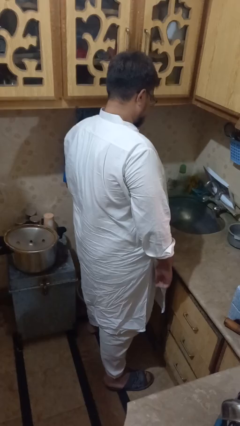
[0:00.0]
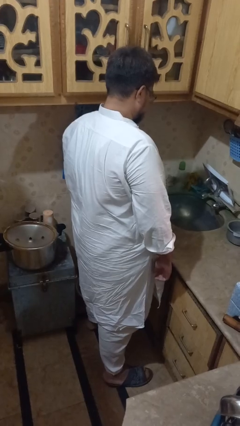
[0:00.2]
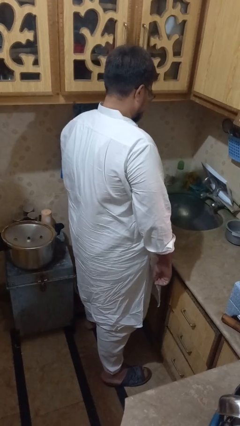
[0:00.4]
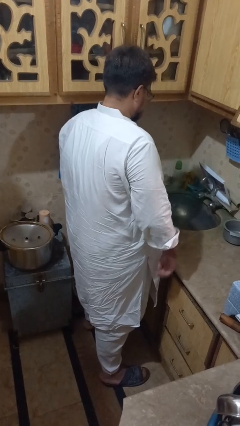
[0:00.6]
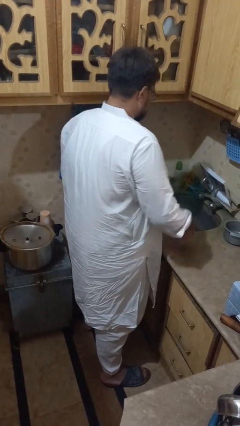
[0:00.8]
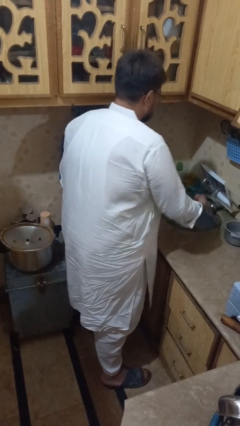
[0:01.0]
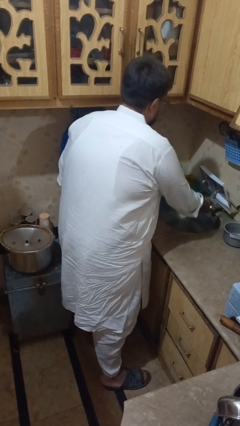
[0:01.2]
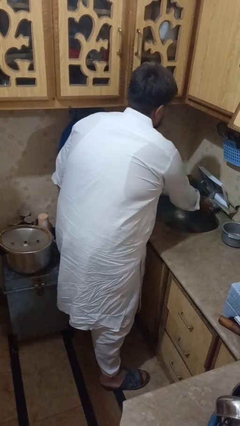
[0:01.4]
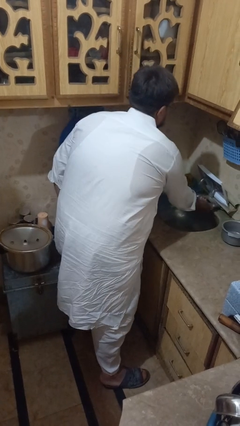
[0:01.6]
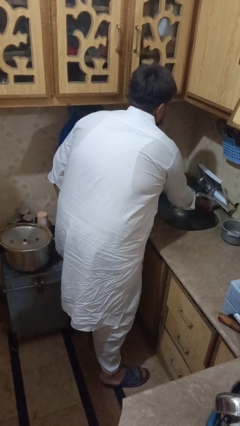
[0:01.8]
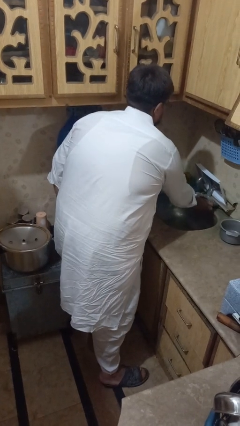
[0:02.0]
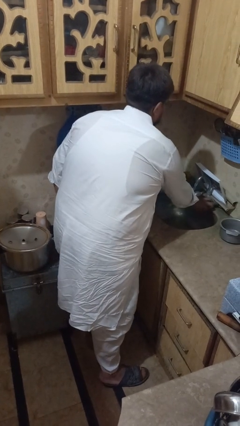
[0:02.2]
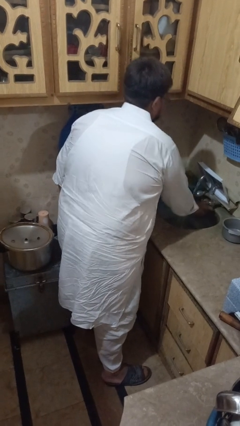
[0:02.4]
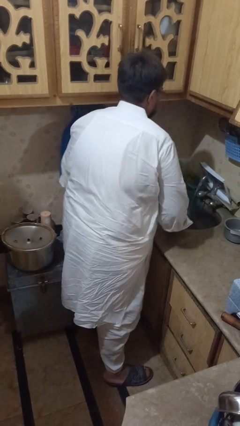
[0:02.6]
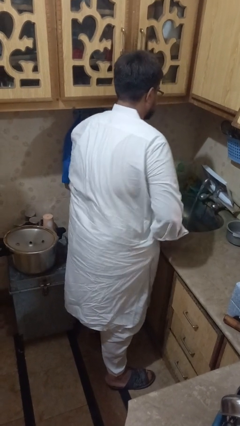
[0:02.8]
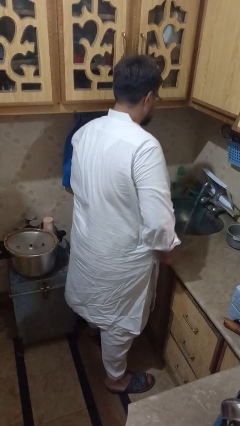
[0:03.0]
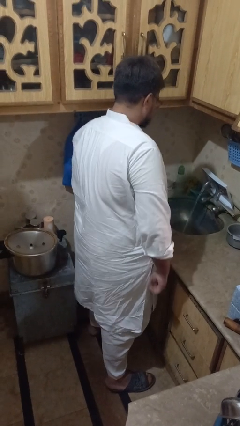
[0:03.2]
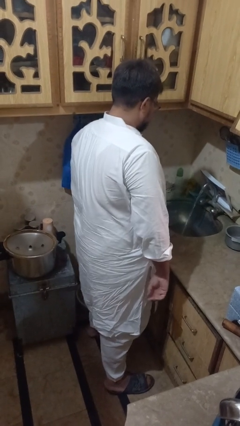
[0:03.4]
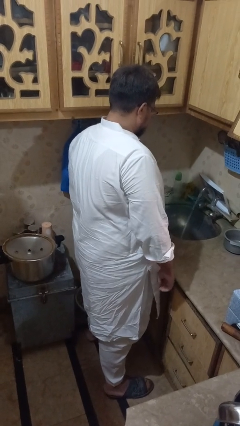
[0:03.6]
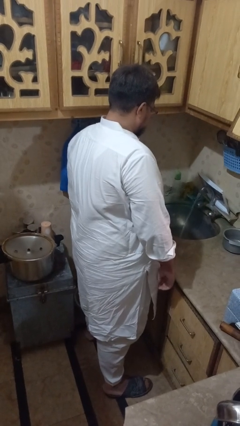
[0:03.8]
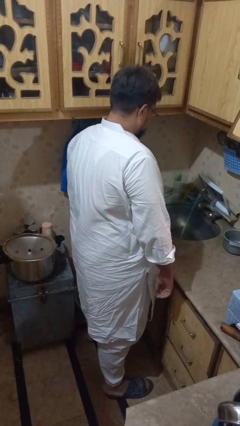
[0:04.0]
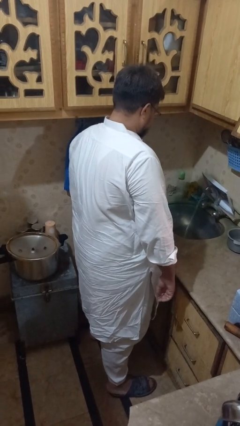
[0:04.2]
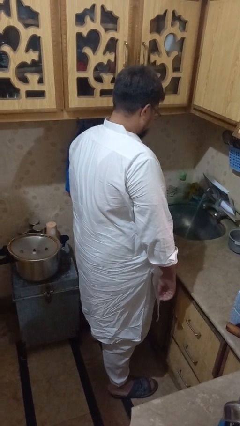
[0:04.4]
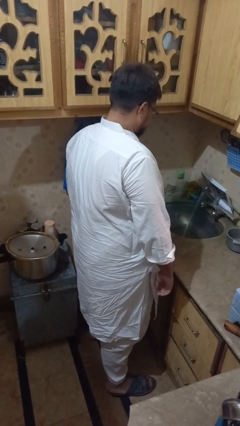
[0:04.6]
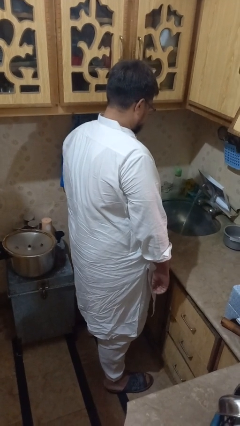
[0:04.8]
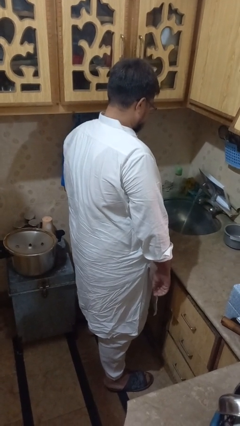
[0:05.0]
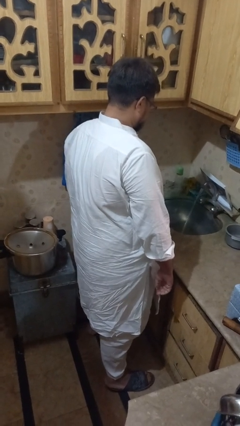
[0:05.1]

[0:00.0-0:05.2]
person turns on faucet

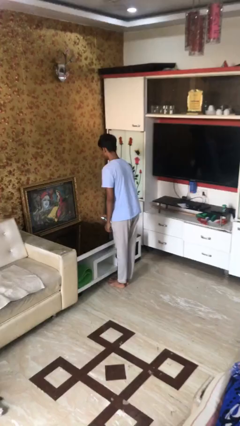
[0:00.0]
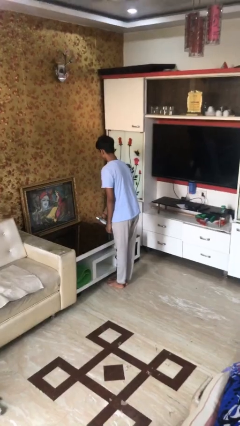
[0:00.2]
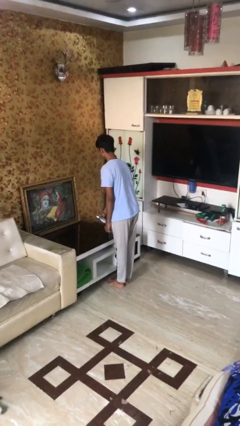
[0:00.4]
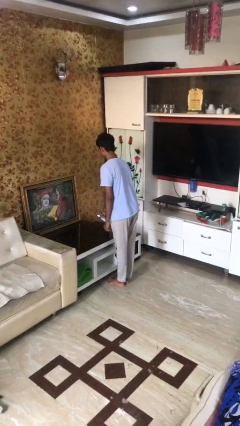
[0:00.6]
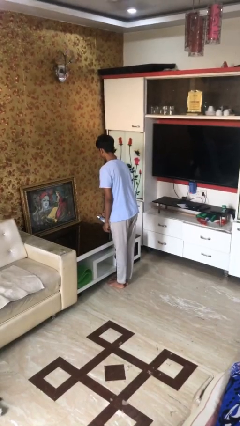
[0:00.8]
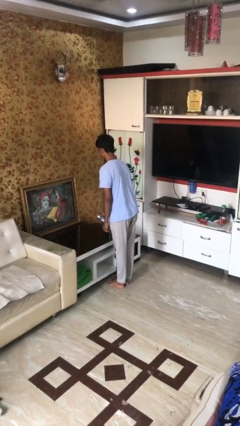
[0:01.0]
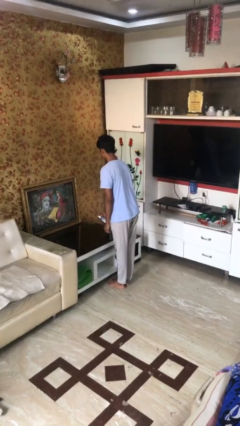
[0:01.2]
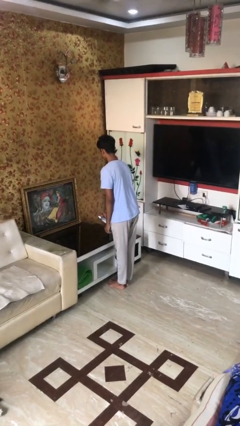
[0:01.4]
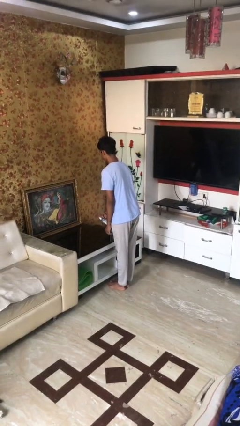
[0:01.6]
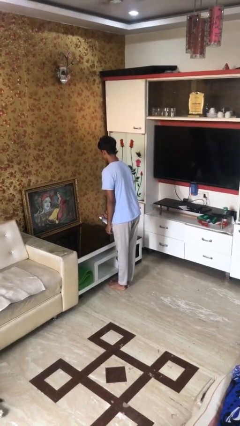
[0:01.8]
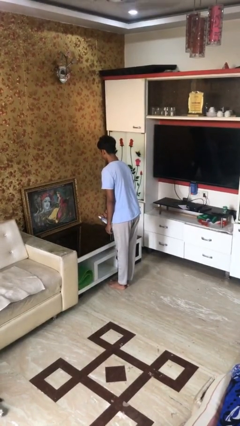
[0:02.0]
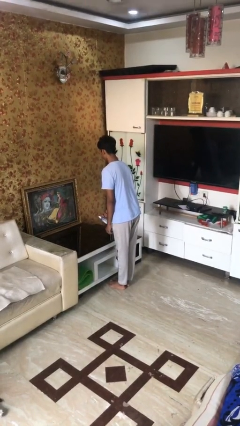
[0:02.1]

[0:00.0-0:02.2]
person sprays from bottle

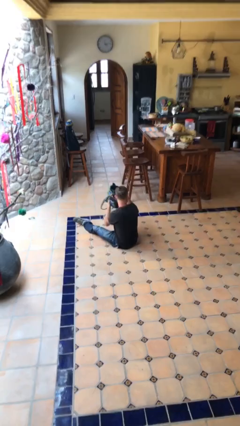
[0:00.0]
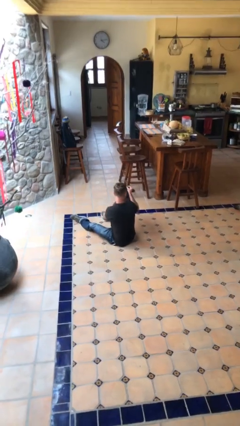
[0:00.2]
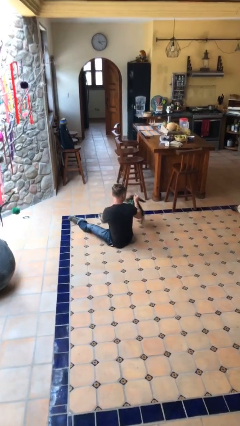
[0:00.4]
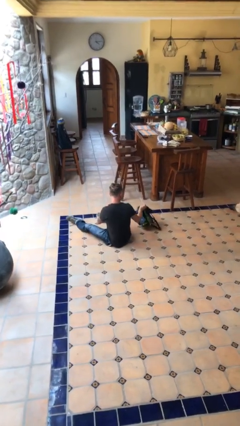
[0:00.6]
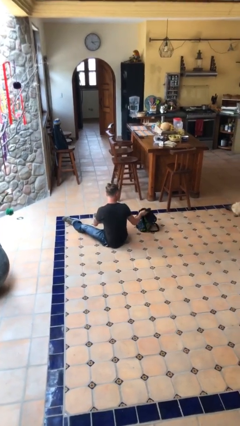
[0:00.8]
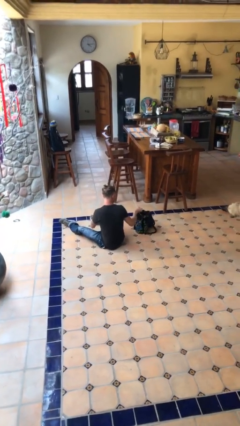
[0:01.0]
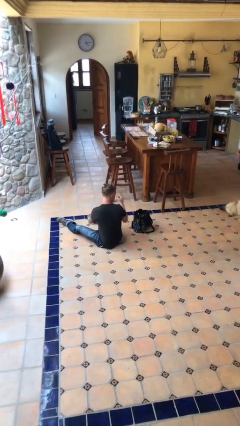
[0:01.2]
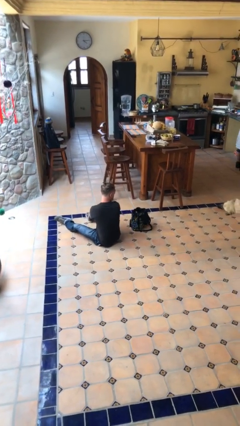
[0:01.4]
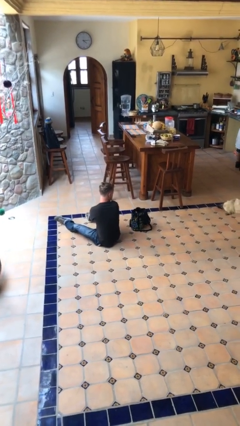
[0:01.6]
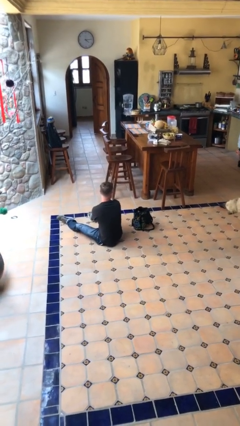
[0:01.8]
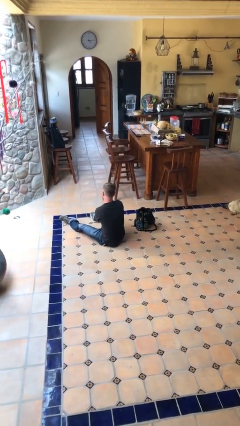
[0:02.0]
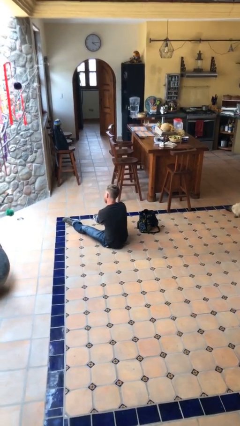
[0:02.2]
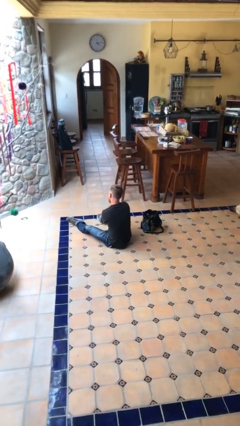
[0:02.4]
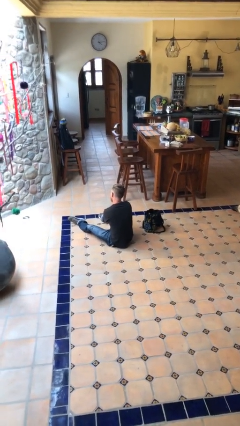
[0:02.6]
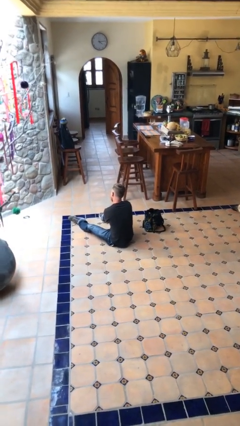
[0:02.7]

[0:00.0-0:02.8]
person puts down object on floor

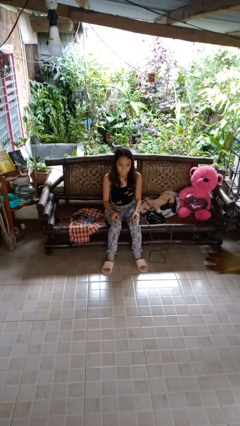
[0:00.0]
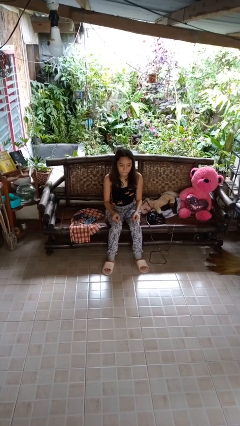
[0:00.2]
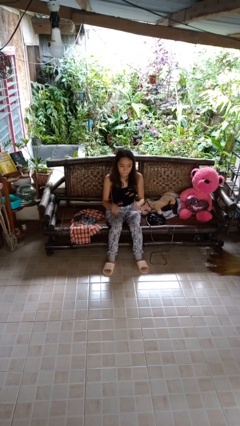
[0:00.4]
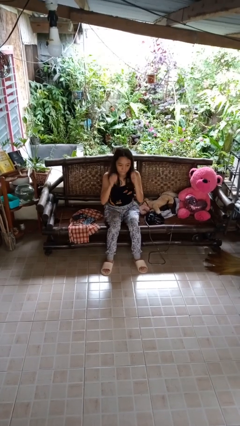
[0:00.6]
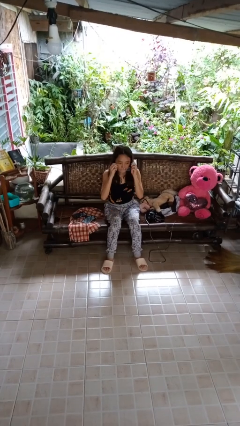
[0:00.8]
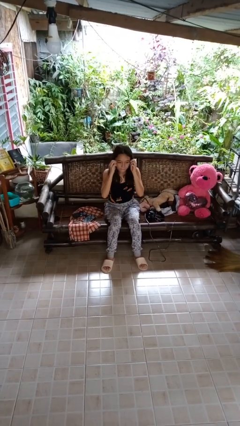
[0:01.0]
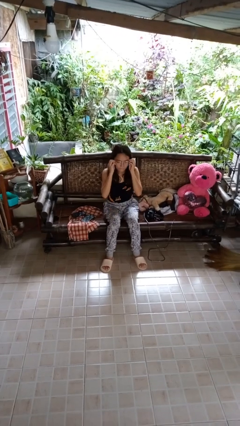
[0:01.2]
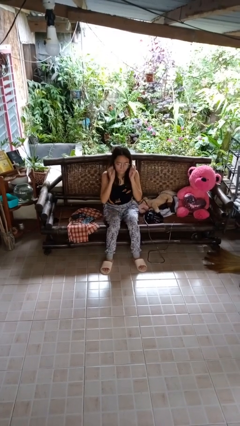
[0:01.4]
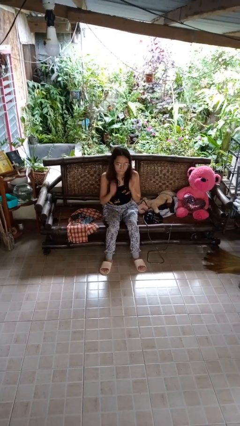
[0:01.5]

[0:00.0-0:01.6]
person puts on glasses

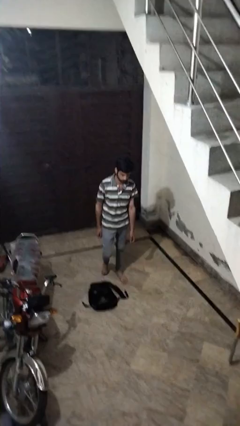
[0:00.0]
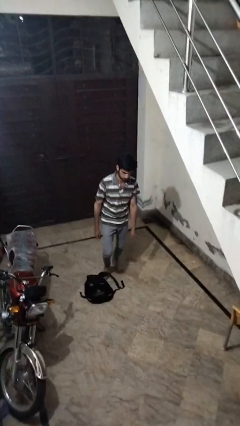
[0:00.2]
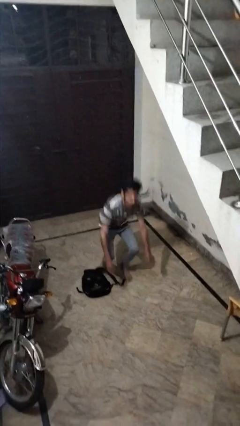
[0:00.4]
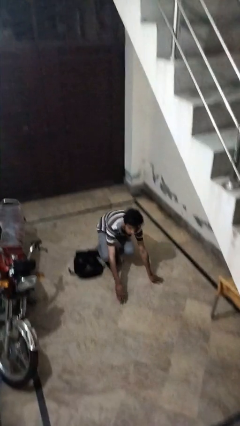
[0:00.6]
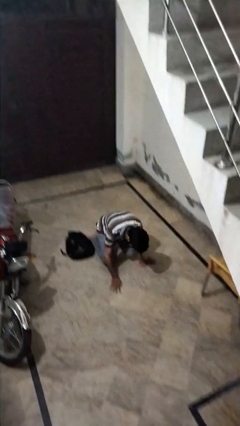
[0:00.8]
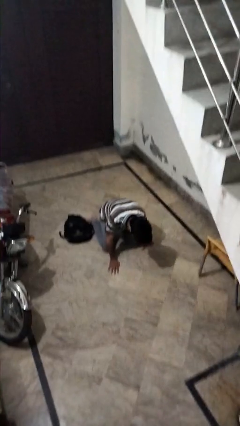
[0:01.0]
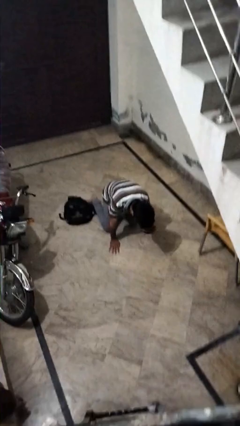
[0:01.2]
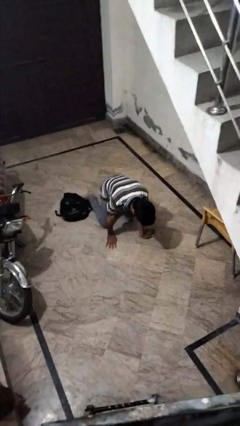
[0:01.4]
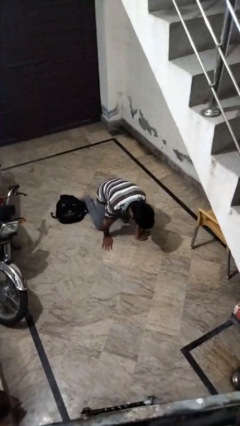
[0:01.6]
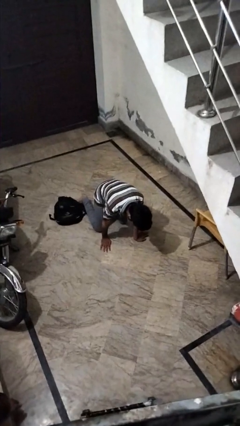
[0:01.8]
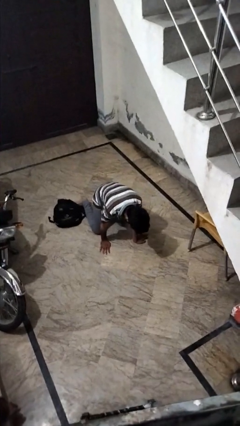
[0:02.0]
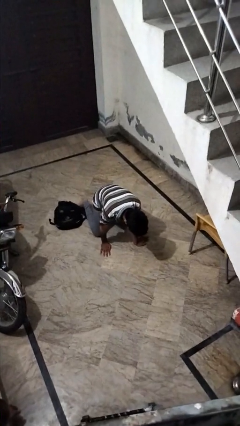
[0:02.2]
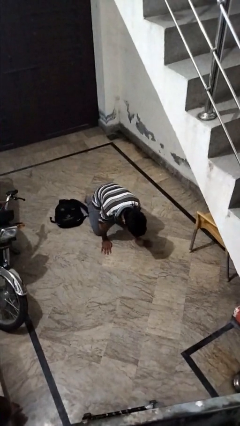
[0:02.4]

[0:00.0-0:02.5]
person trips on object on floor

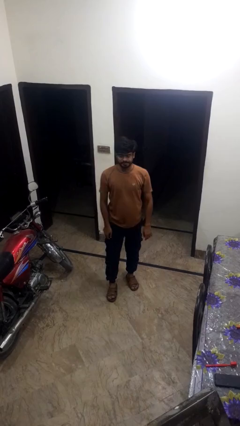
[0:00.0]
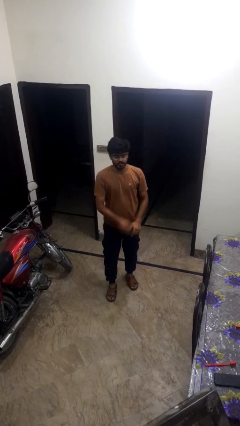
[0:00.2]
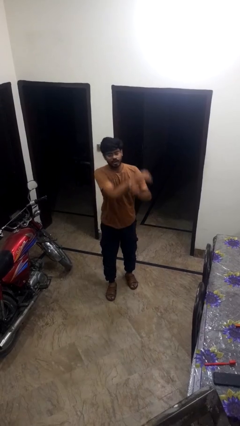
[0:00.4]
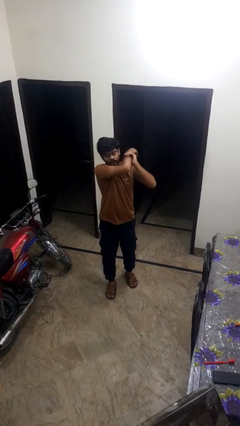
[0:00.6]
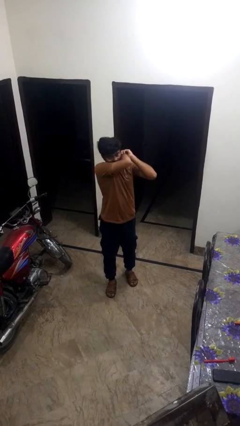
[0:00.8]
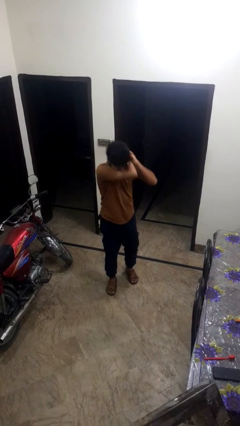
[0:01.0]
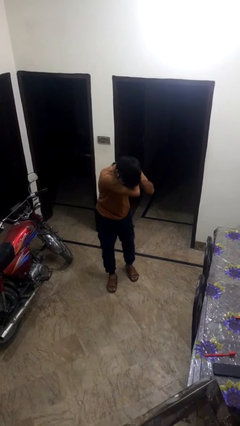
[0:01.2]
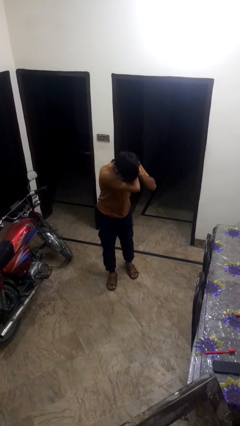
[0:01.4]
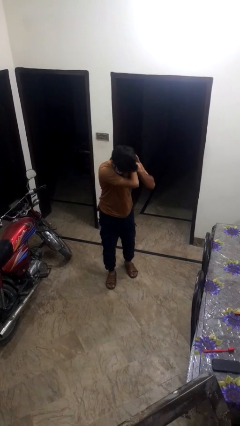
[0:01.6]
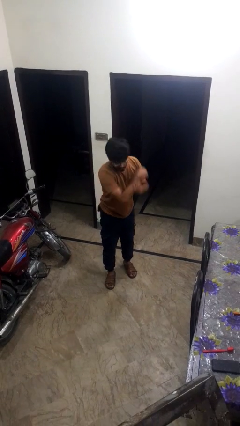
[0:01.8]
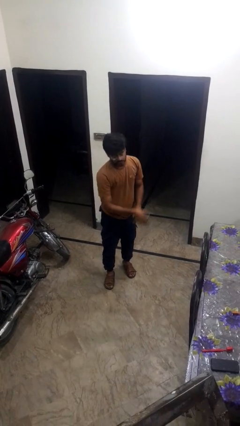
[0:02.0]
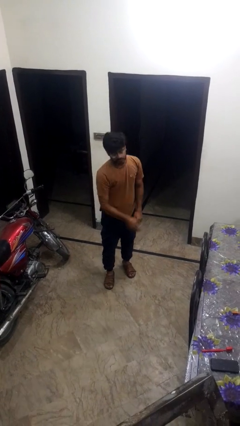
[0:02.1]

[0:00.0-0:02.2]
person sneezes into arm

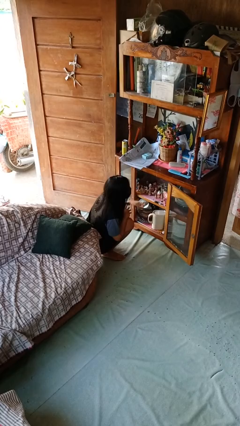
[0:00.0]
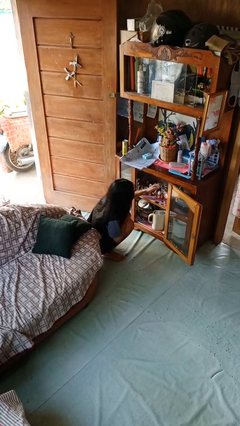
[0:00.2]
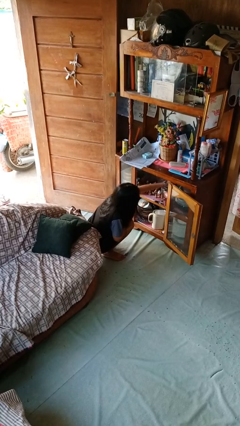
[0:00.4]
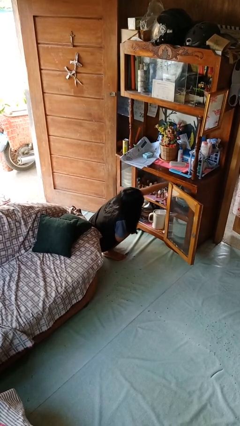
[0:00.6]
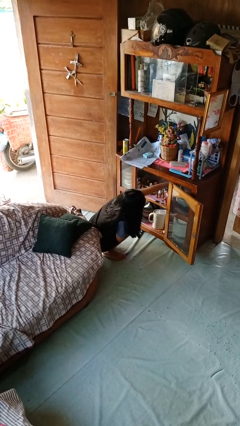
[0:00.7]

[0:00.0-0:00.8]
person searches in cabinet
